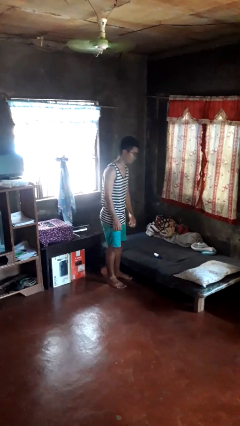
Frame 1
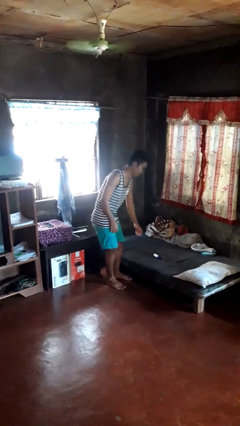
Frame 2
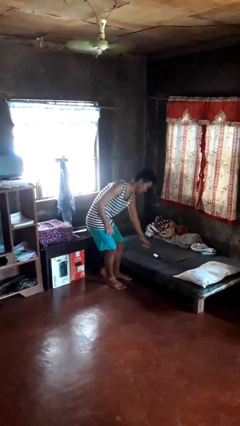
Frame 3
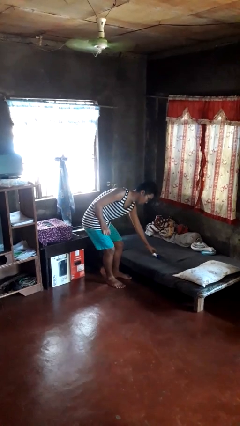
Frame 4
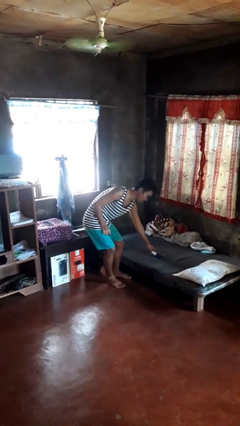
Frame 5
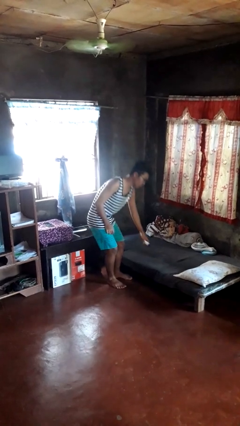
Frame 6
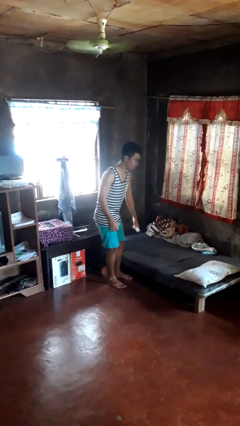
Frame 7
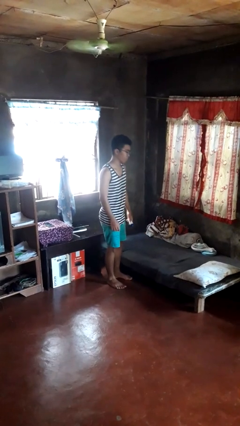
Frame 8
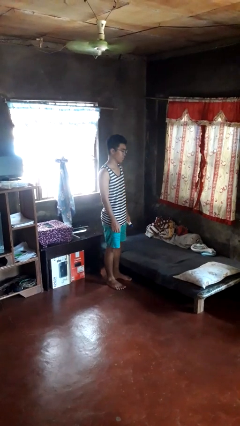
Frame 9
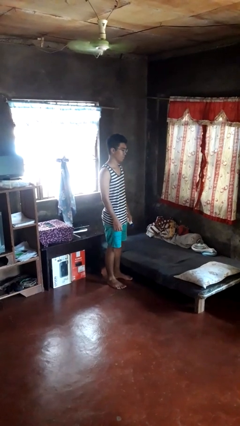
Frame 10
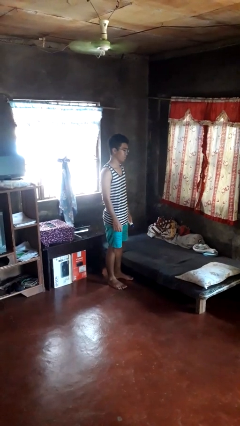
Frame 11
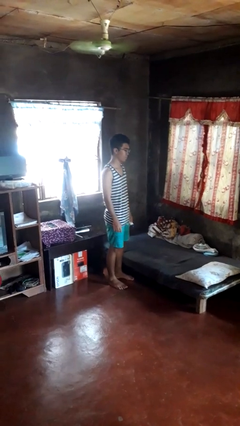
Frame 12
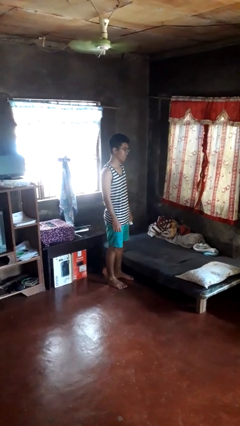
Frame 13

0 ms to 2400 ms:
person picks up object from bed

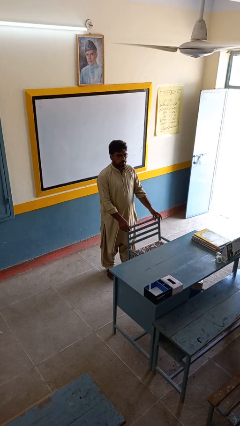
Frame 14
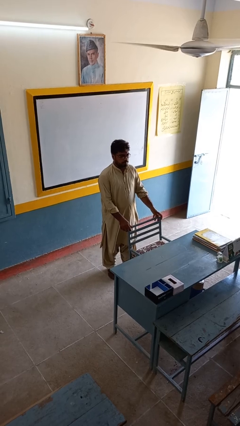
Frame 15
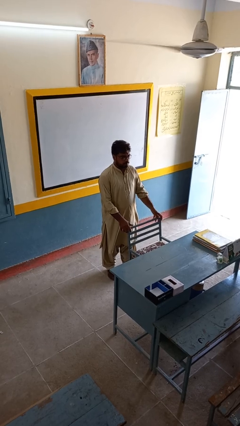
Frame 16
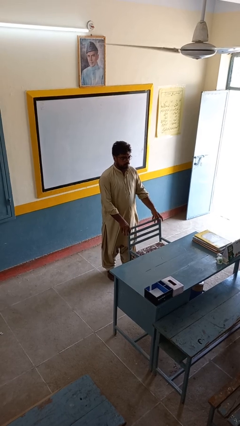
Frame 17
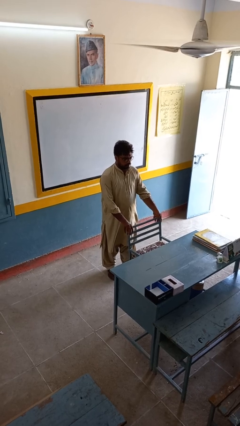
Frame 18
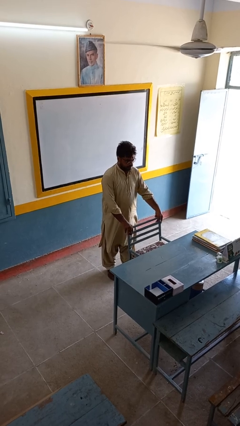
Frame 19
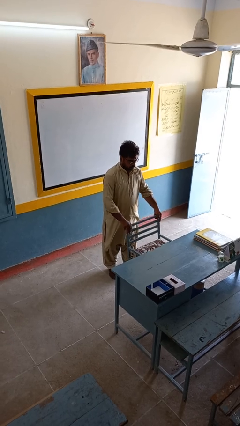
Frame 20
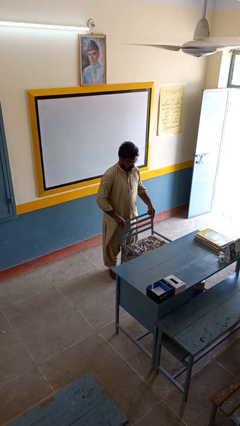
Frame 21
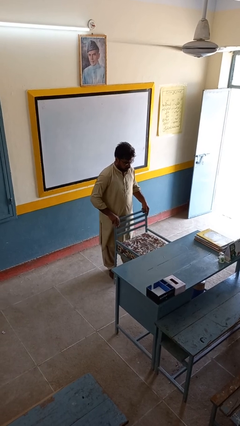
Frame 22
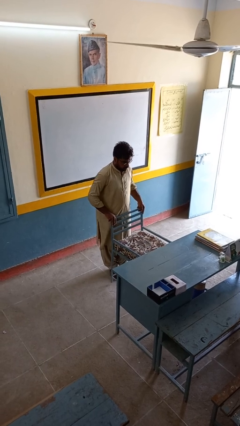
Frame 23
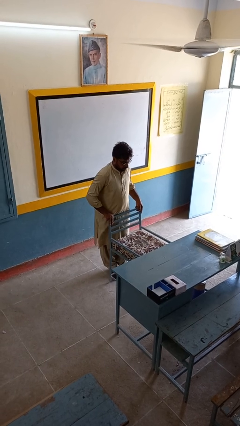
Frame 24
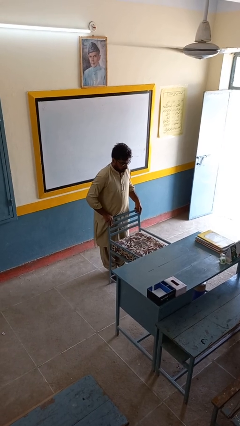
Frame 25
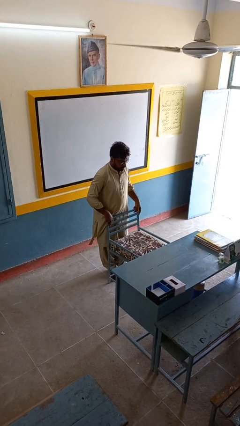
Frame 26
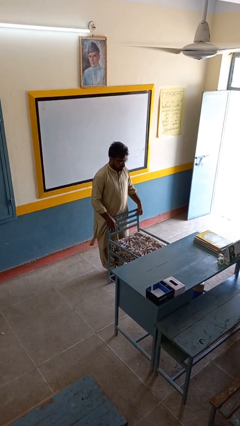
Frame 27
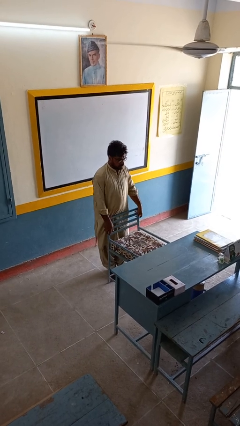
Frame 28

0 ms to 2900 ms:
person pulls out chair

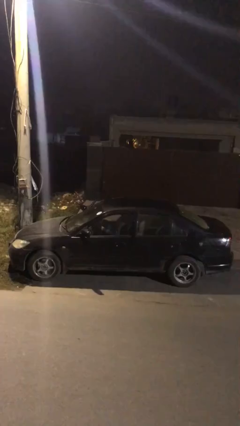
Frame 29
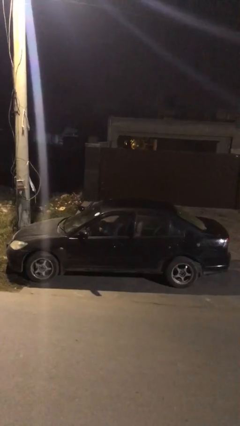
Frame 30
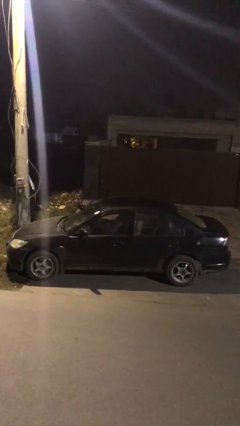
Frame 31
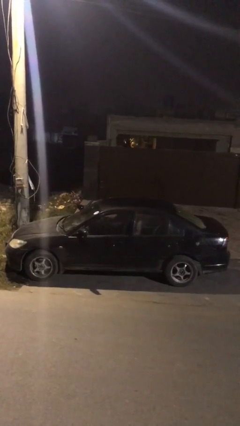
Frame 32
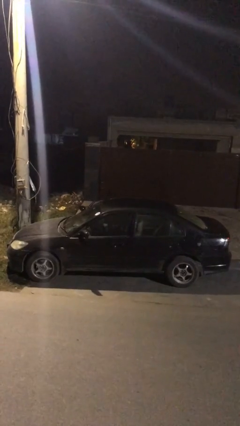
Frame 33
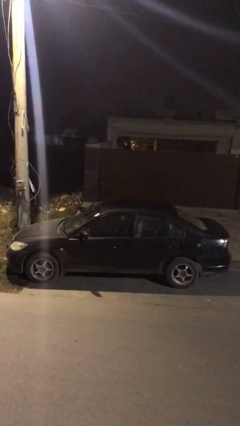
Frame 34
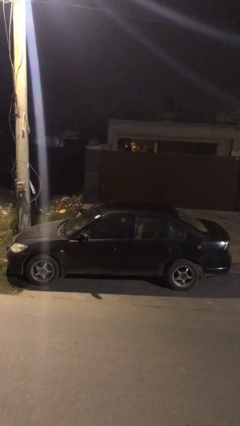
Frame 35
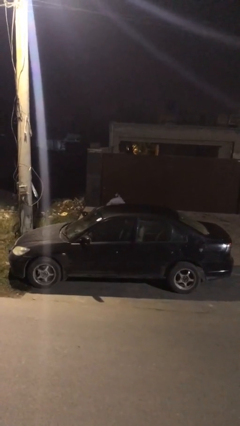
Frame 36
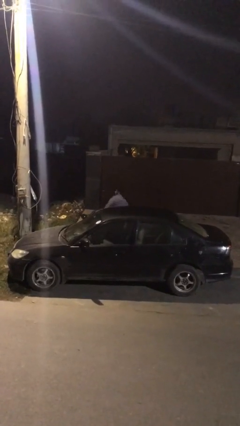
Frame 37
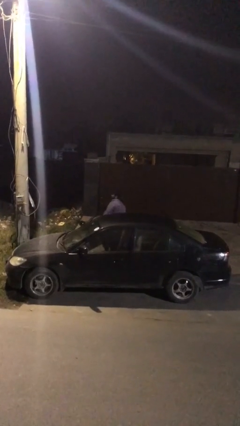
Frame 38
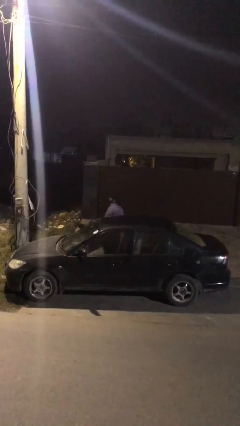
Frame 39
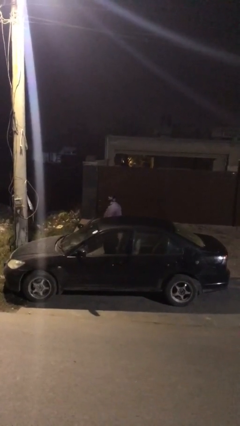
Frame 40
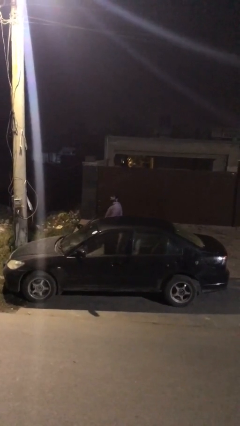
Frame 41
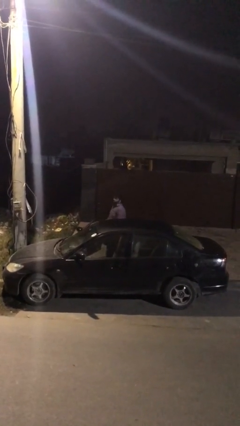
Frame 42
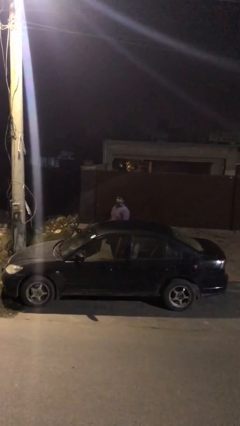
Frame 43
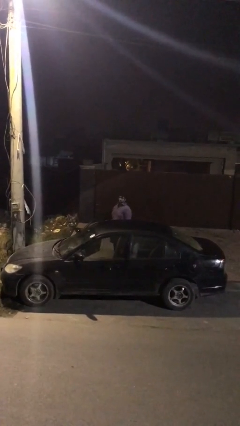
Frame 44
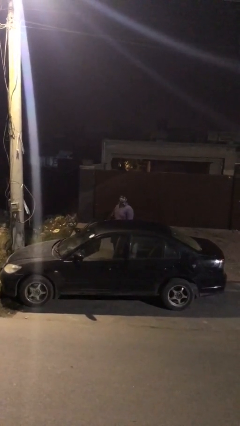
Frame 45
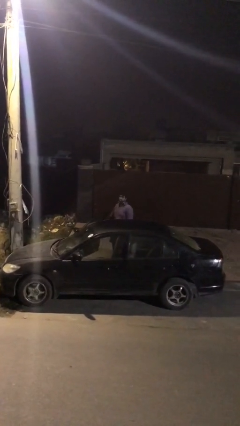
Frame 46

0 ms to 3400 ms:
person exits car

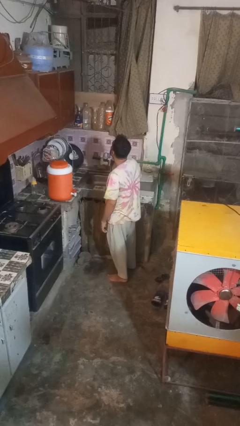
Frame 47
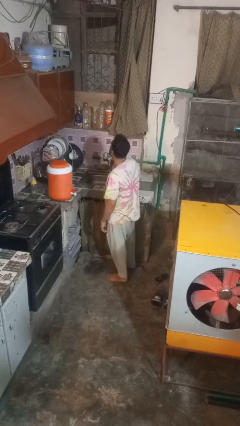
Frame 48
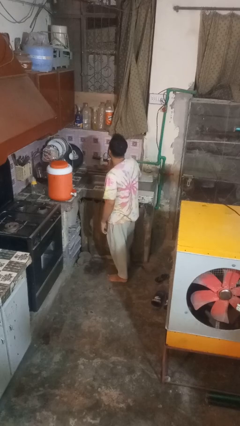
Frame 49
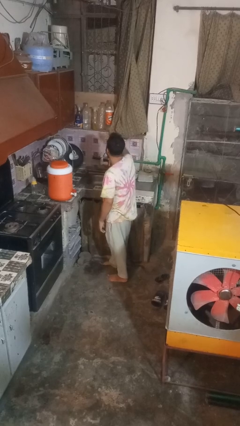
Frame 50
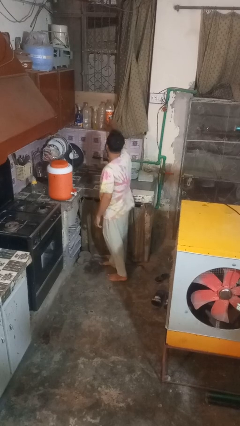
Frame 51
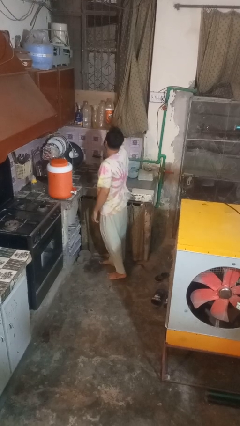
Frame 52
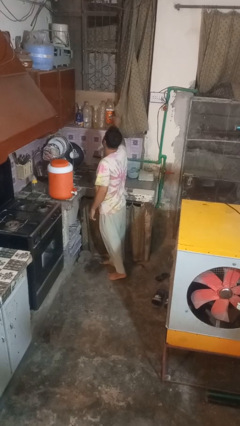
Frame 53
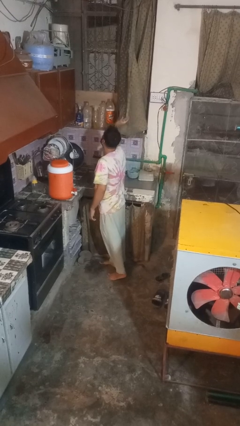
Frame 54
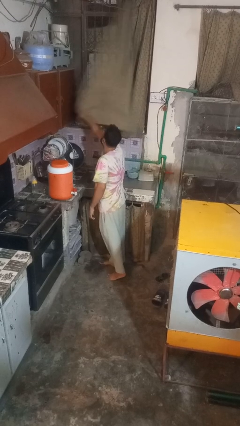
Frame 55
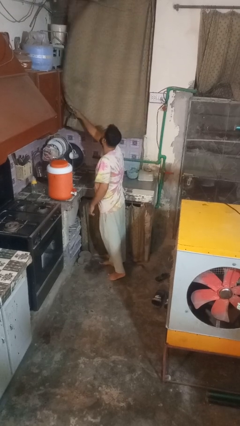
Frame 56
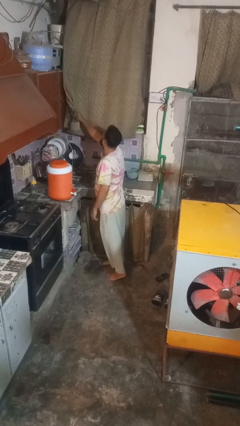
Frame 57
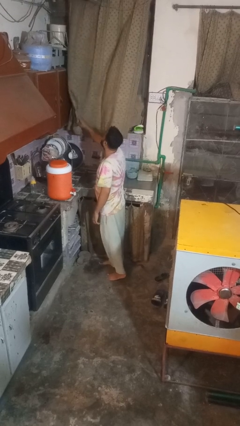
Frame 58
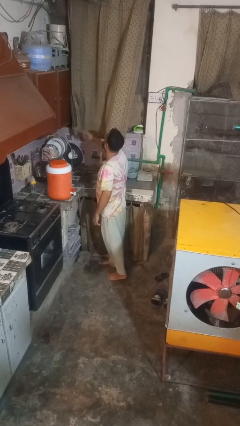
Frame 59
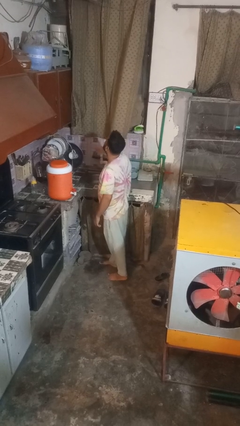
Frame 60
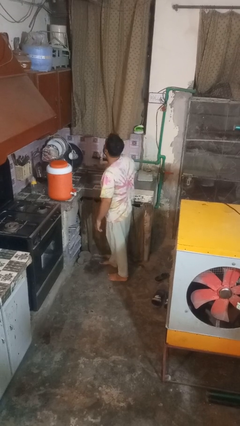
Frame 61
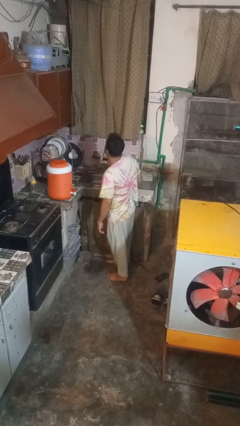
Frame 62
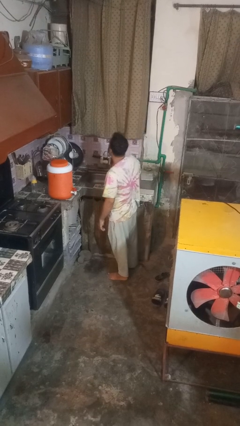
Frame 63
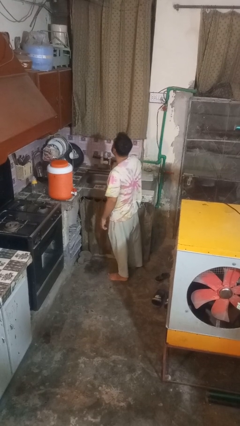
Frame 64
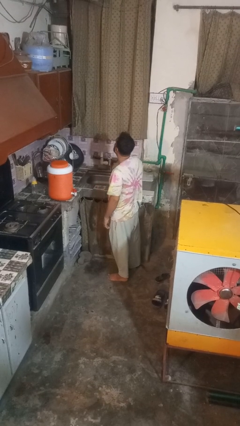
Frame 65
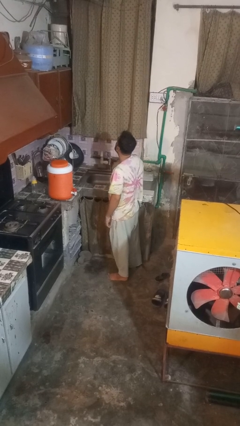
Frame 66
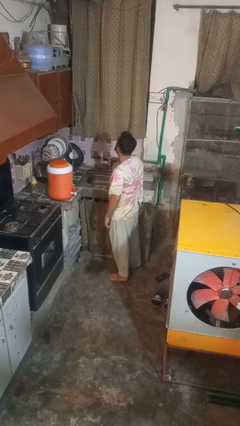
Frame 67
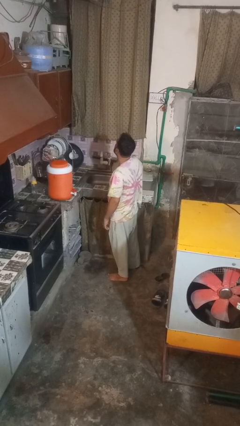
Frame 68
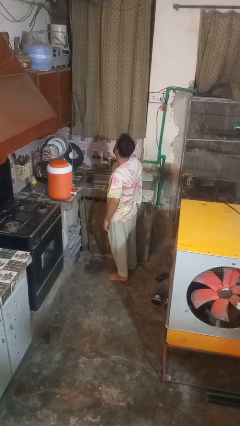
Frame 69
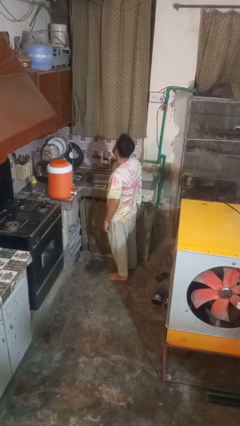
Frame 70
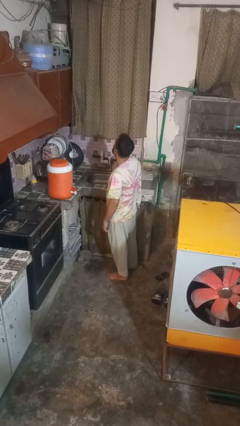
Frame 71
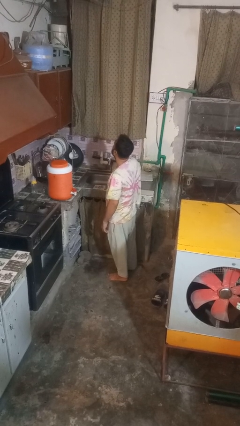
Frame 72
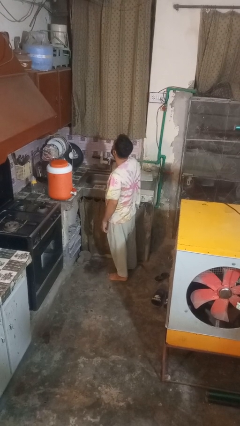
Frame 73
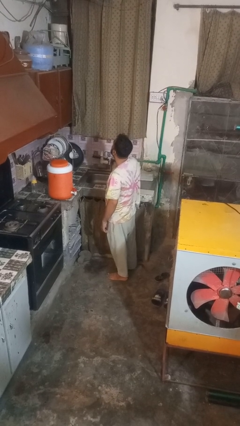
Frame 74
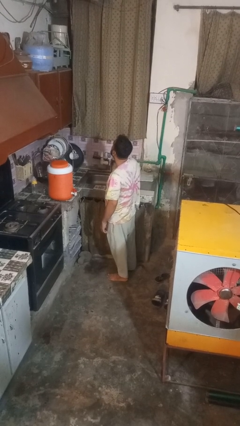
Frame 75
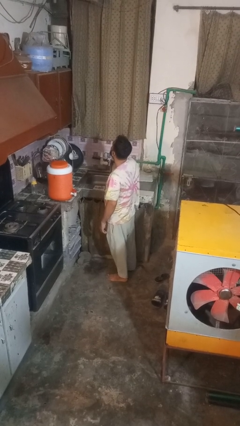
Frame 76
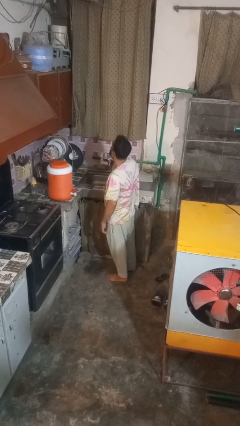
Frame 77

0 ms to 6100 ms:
person closes curtains

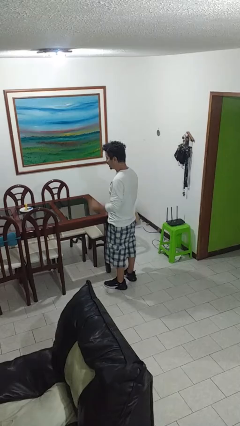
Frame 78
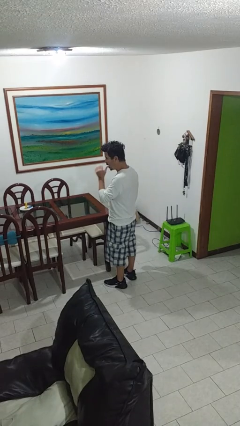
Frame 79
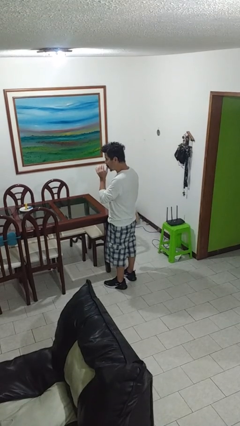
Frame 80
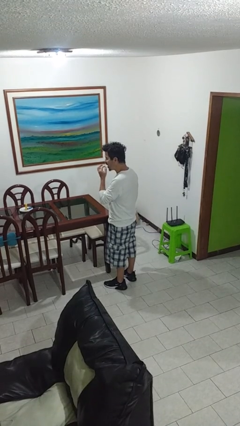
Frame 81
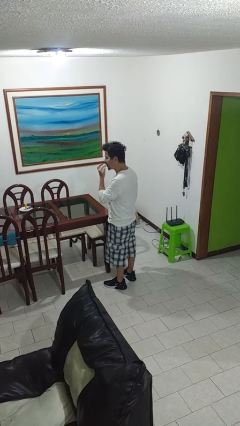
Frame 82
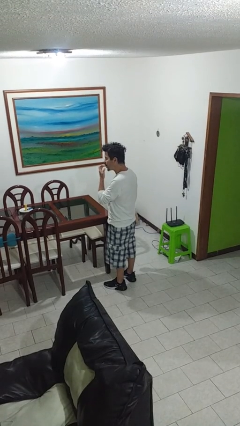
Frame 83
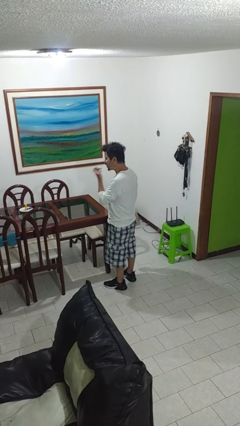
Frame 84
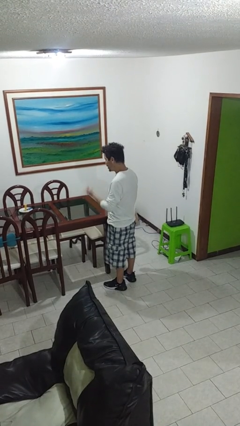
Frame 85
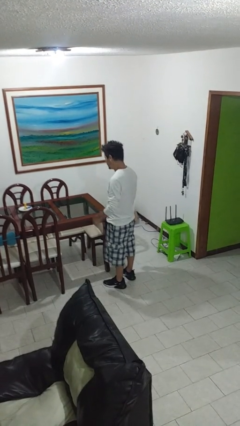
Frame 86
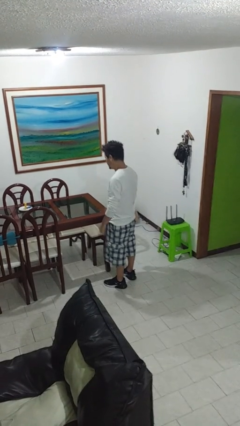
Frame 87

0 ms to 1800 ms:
person licks fingers

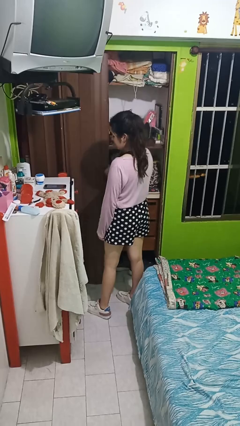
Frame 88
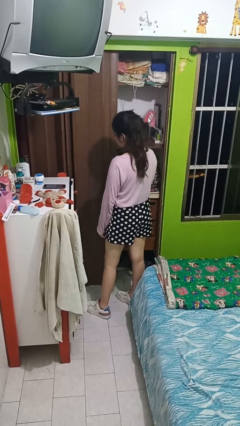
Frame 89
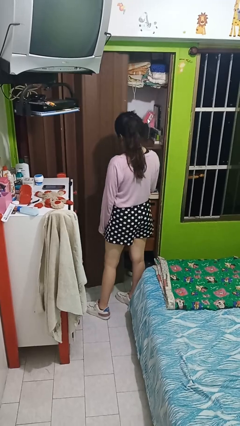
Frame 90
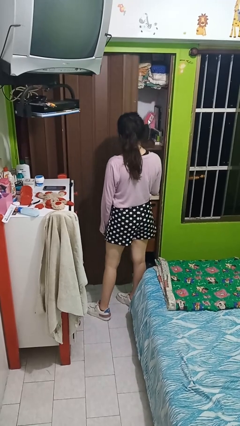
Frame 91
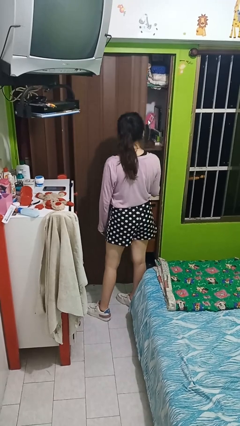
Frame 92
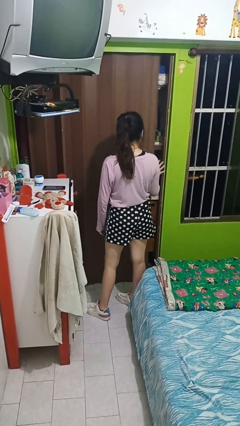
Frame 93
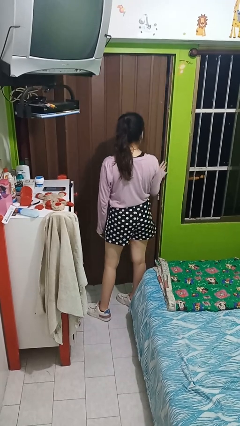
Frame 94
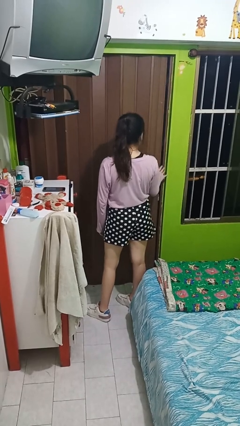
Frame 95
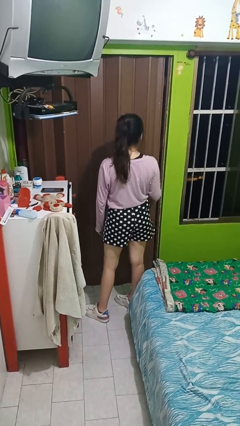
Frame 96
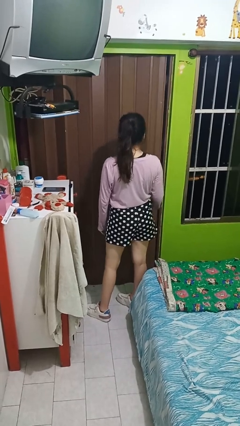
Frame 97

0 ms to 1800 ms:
person closes sliding door
